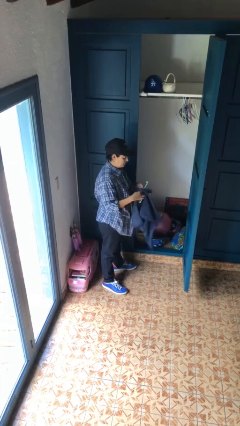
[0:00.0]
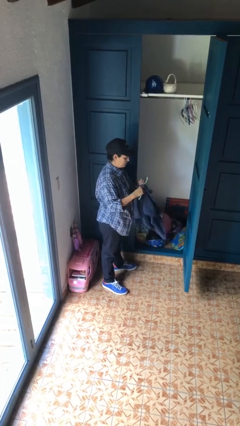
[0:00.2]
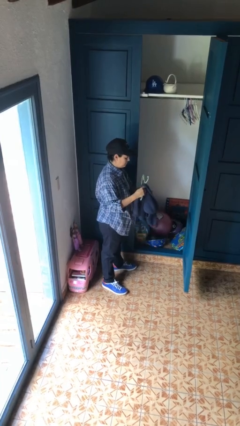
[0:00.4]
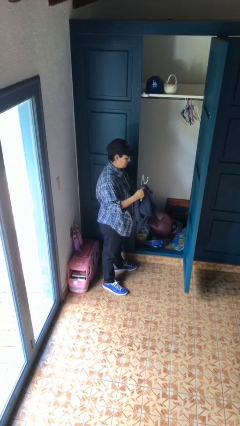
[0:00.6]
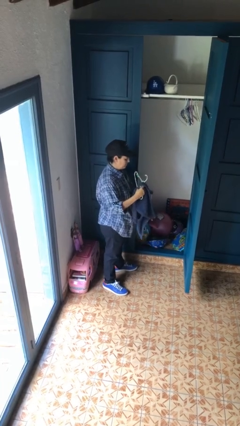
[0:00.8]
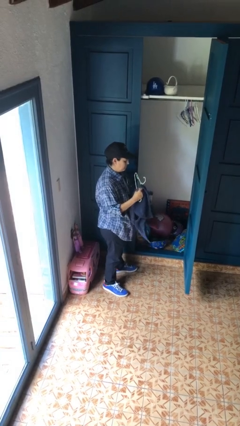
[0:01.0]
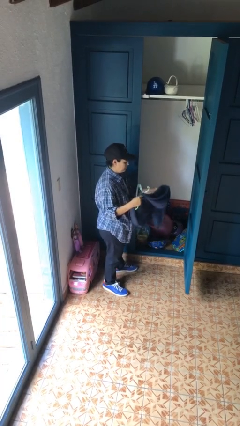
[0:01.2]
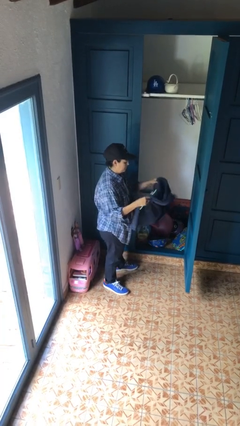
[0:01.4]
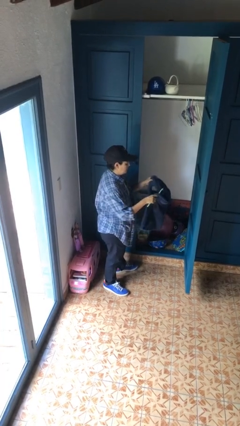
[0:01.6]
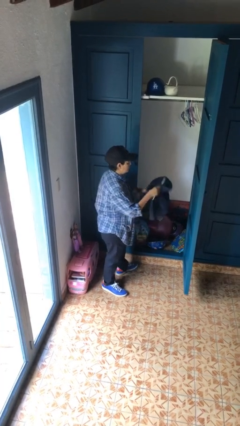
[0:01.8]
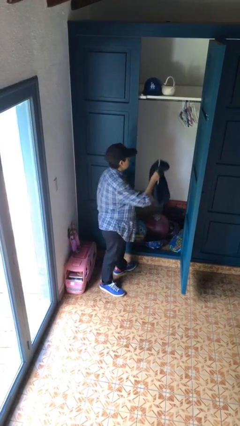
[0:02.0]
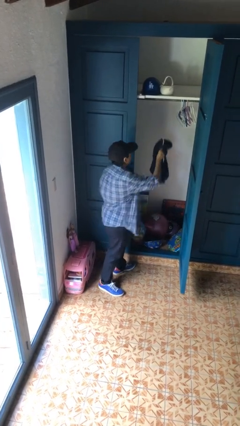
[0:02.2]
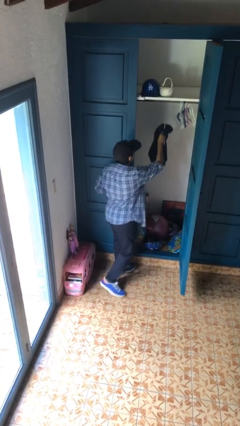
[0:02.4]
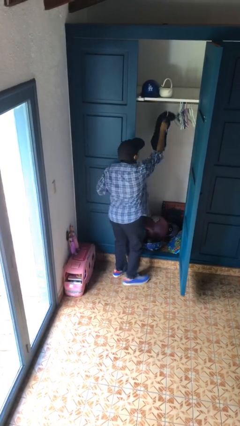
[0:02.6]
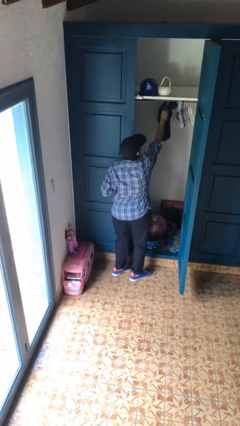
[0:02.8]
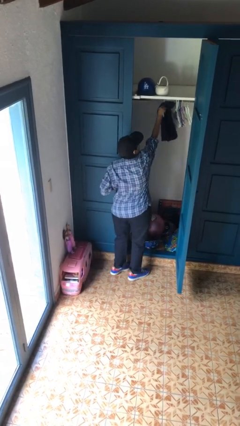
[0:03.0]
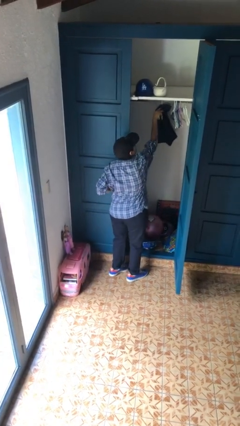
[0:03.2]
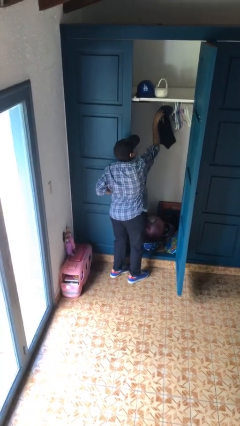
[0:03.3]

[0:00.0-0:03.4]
person puts clothes into closet

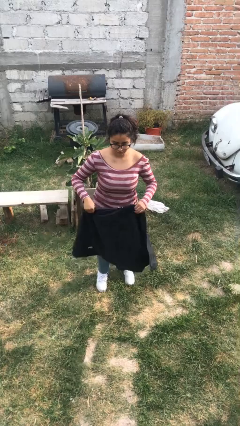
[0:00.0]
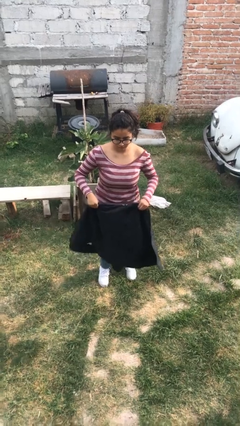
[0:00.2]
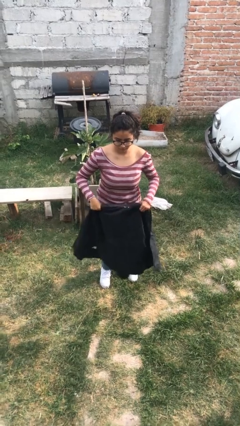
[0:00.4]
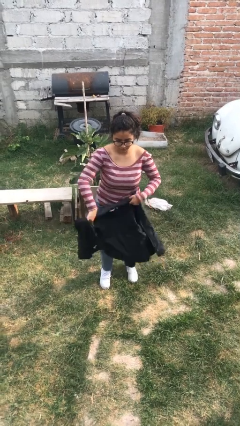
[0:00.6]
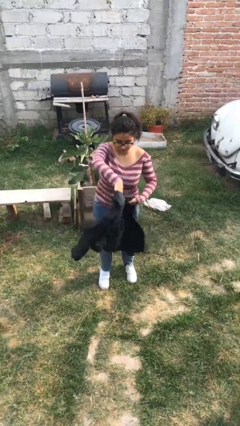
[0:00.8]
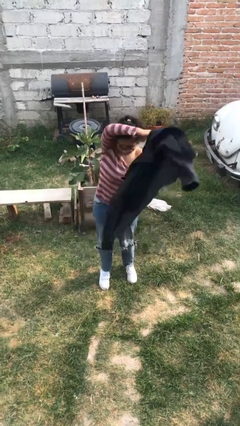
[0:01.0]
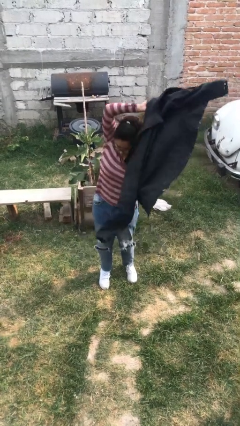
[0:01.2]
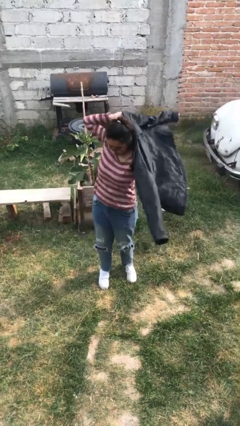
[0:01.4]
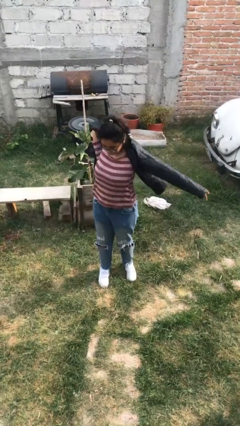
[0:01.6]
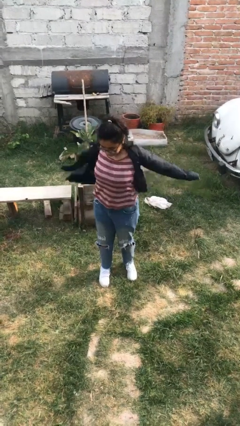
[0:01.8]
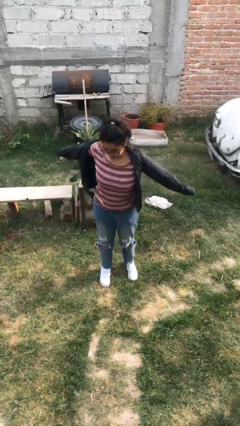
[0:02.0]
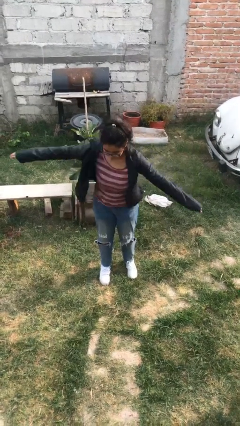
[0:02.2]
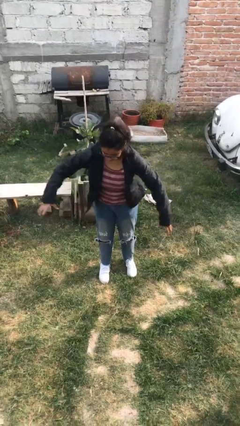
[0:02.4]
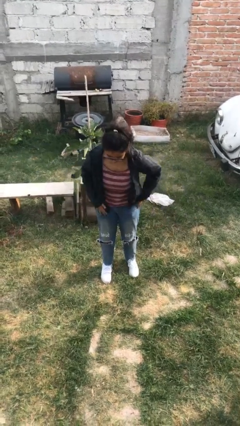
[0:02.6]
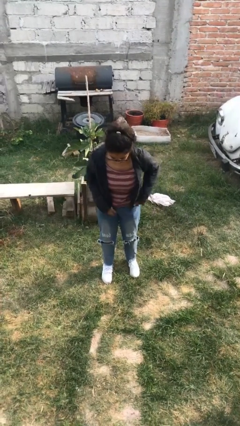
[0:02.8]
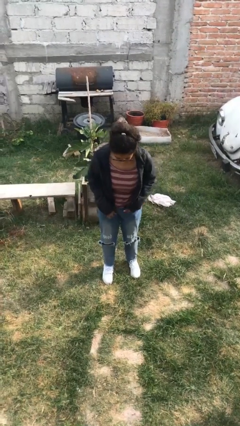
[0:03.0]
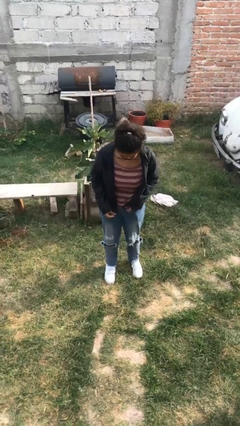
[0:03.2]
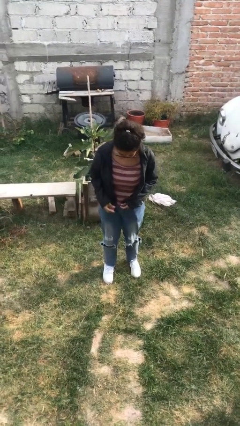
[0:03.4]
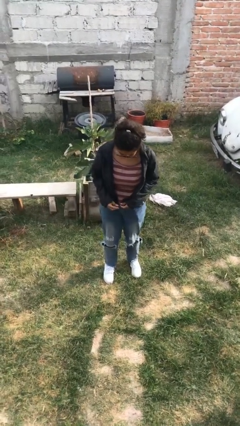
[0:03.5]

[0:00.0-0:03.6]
person puts on jacket

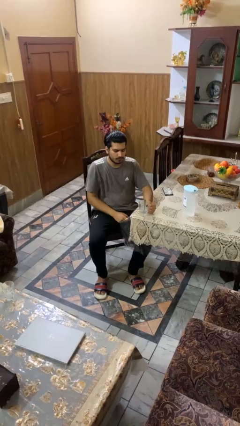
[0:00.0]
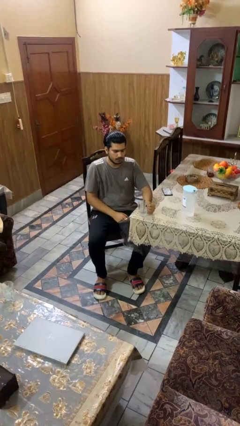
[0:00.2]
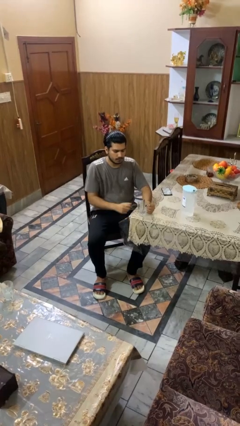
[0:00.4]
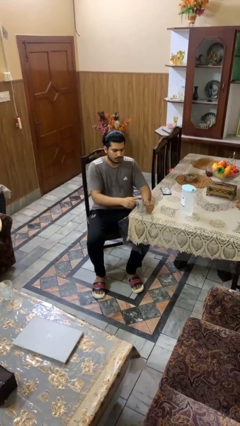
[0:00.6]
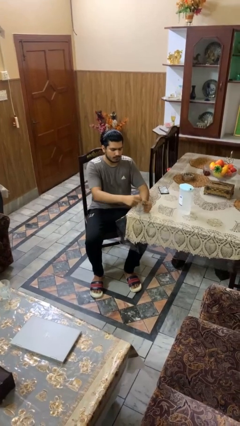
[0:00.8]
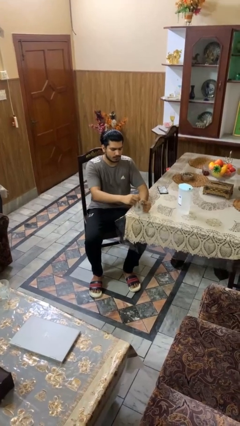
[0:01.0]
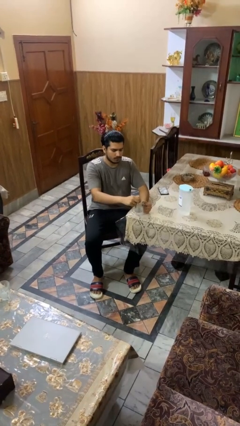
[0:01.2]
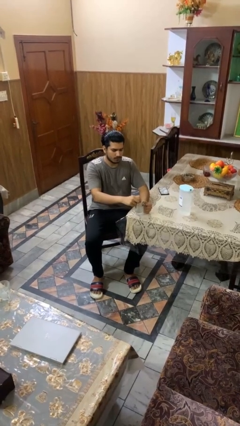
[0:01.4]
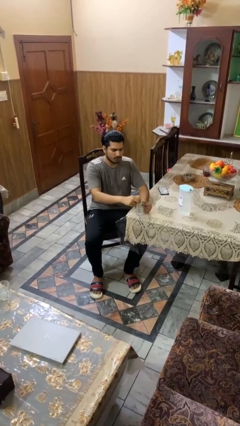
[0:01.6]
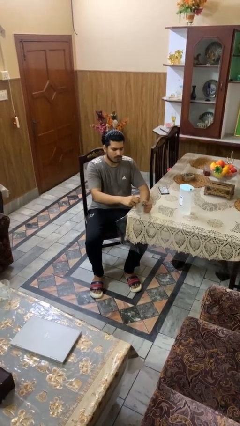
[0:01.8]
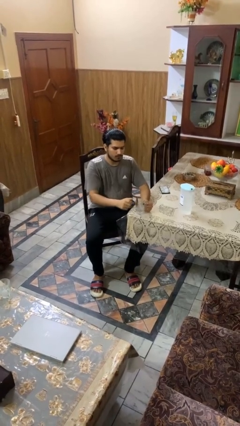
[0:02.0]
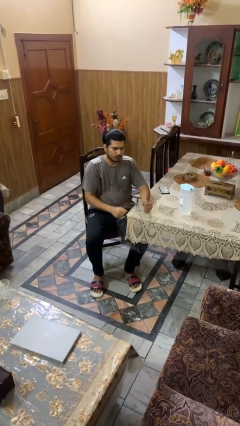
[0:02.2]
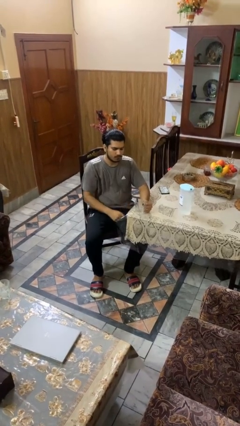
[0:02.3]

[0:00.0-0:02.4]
person stirs mug

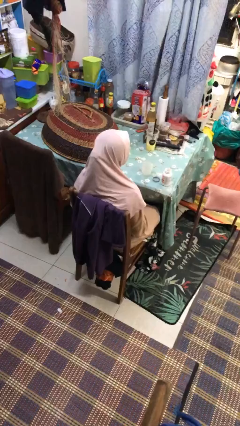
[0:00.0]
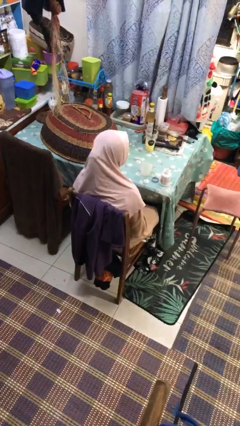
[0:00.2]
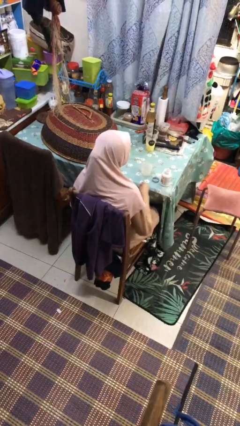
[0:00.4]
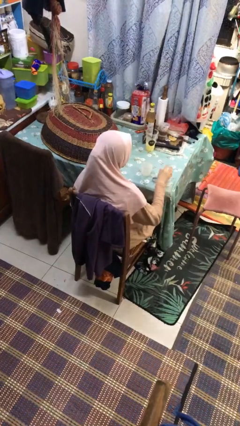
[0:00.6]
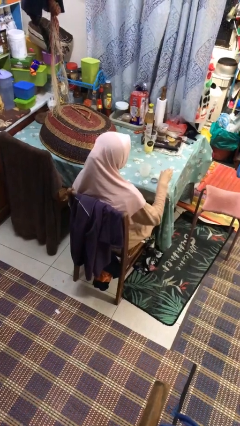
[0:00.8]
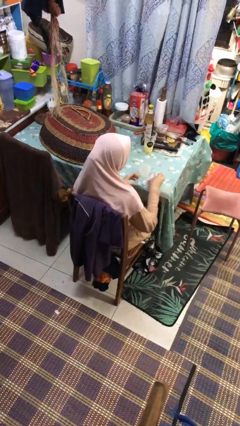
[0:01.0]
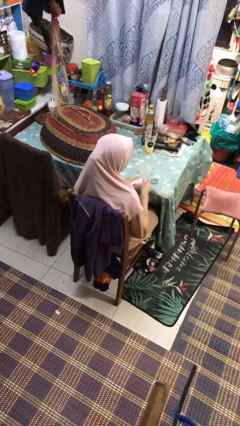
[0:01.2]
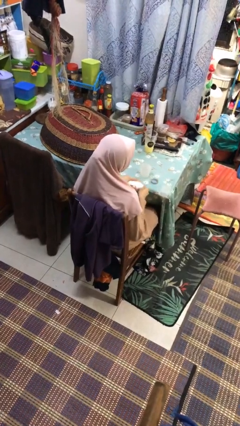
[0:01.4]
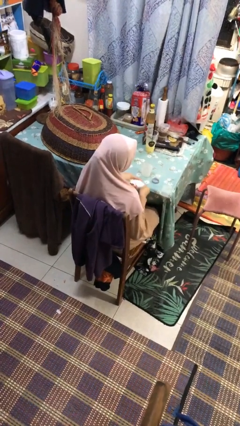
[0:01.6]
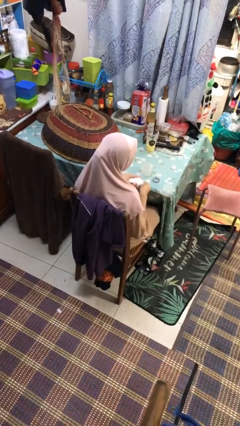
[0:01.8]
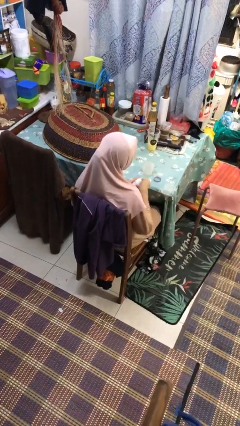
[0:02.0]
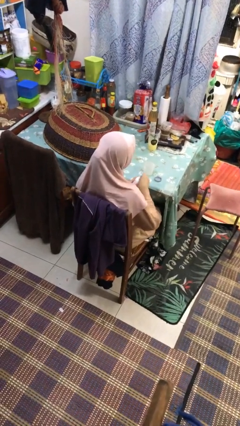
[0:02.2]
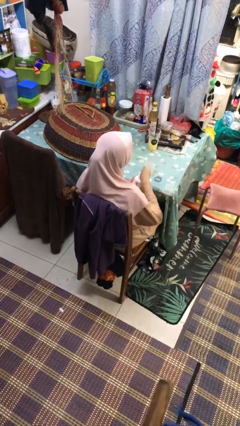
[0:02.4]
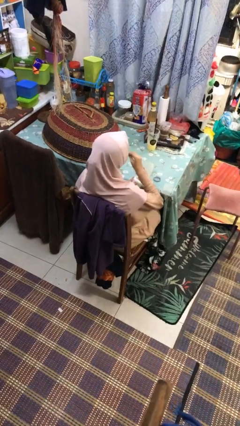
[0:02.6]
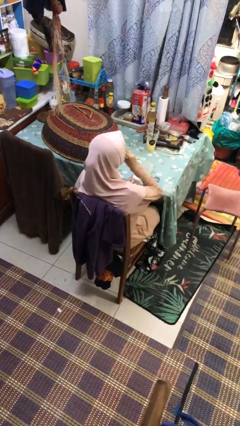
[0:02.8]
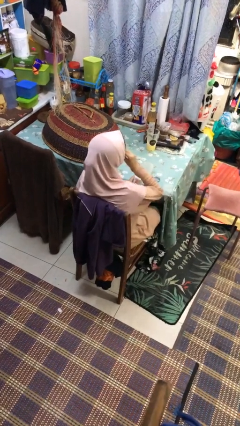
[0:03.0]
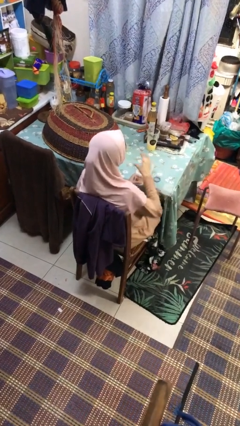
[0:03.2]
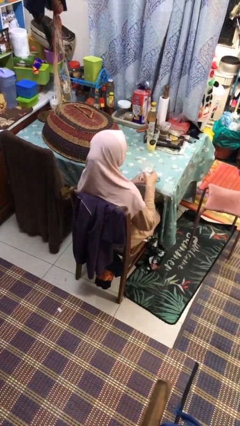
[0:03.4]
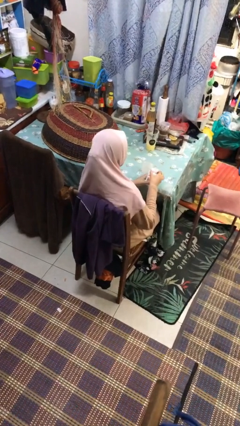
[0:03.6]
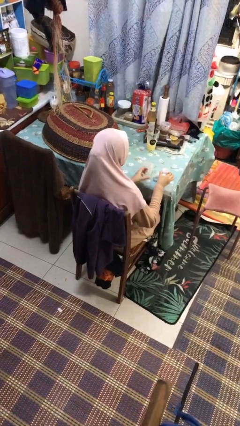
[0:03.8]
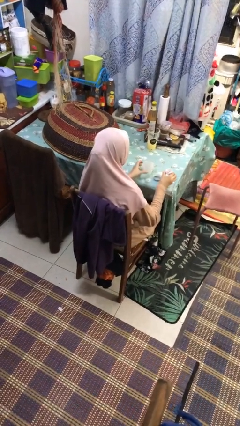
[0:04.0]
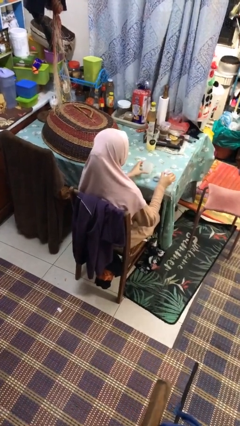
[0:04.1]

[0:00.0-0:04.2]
person takes medicine pills

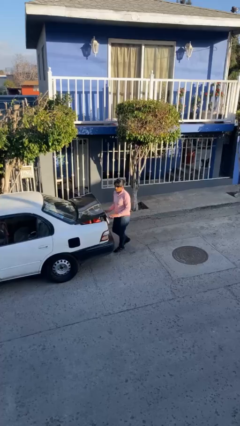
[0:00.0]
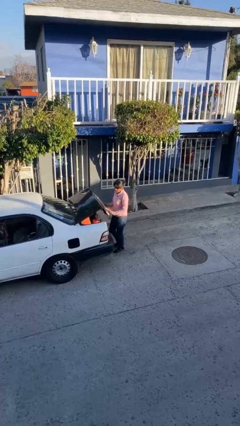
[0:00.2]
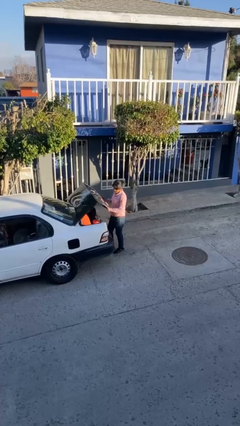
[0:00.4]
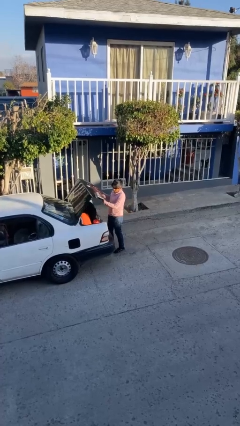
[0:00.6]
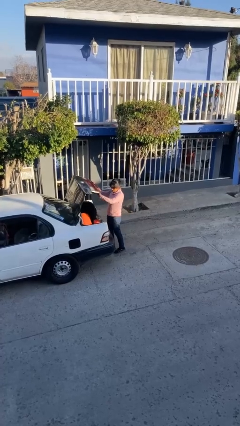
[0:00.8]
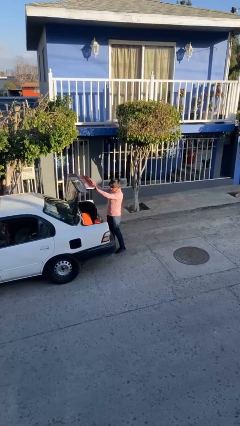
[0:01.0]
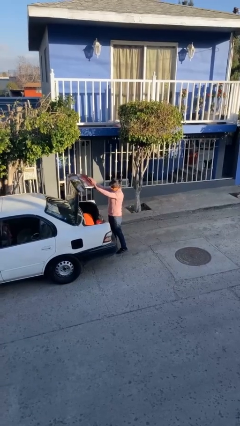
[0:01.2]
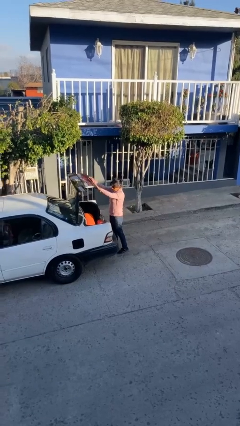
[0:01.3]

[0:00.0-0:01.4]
person opens car trunk

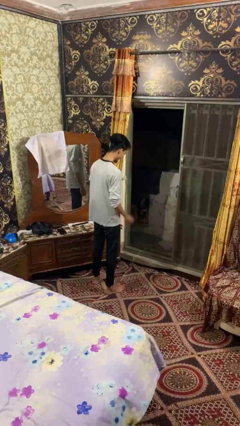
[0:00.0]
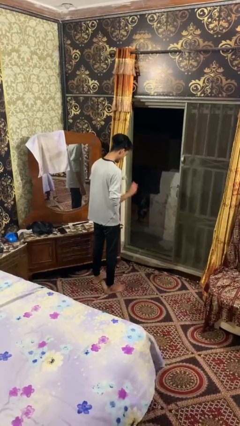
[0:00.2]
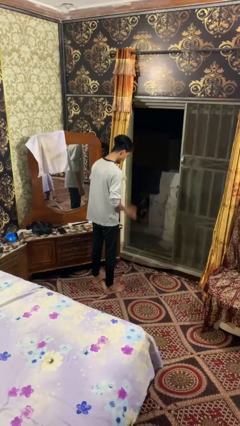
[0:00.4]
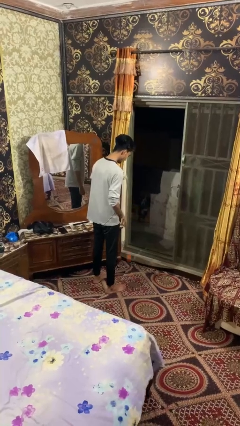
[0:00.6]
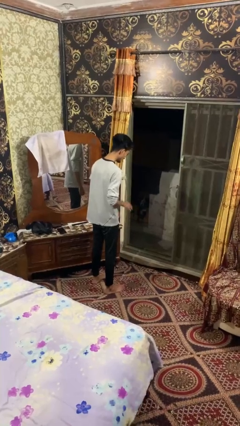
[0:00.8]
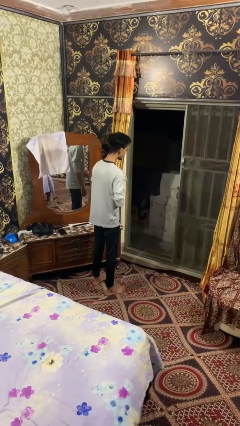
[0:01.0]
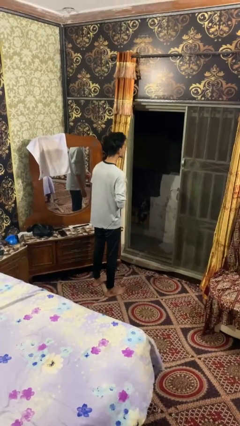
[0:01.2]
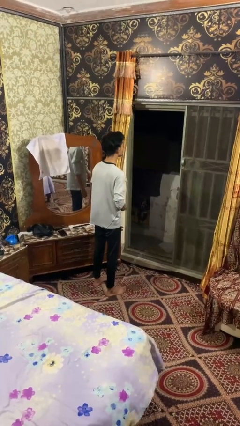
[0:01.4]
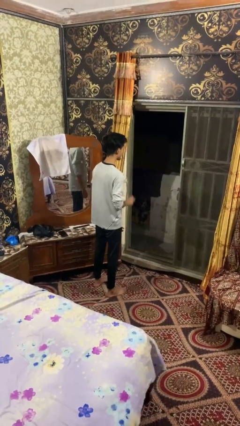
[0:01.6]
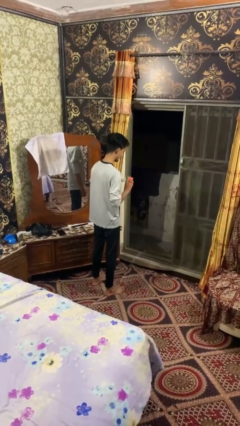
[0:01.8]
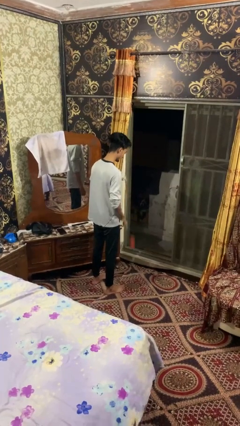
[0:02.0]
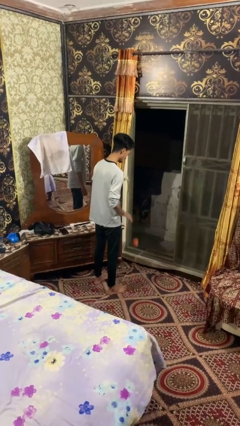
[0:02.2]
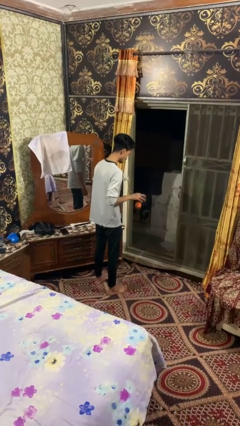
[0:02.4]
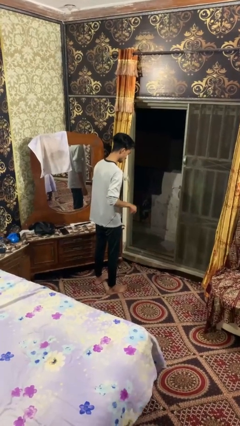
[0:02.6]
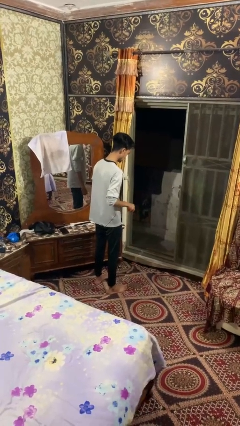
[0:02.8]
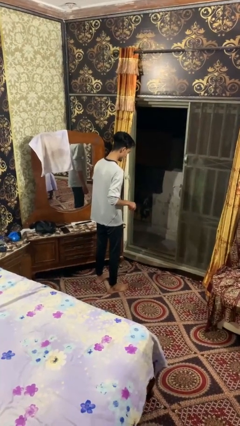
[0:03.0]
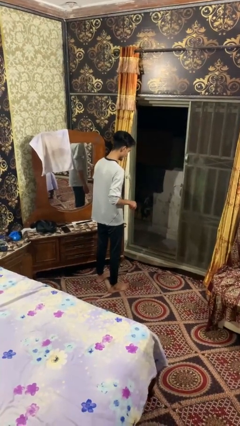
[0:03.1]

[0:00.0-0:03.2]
person bounces ball on floor
